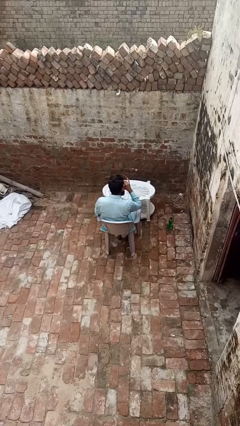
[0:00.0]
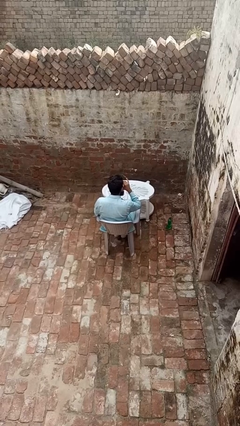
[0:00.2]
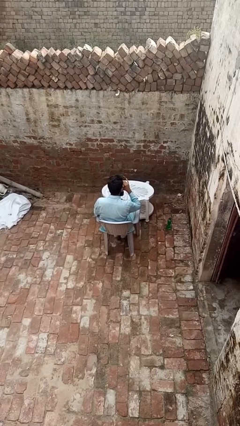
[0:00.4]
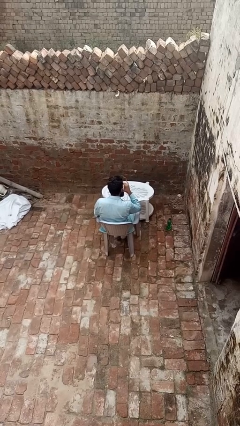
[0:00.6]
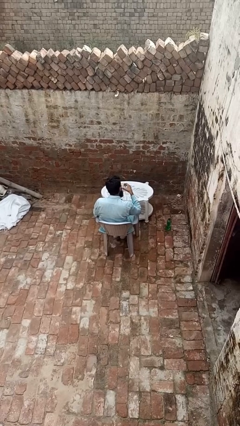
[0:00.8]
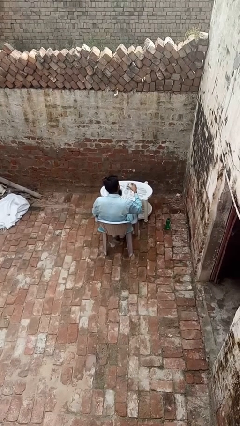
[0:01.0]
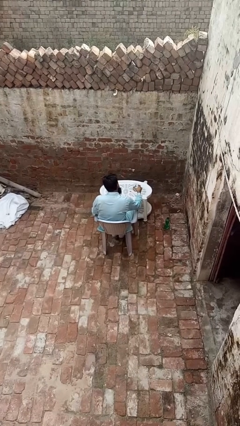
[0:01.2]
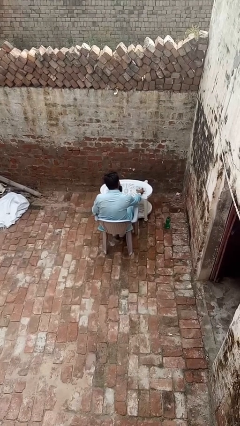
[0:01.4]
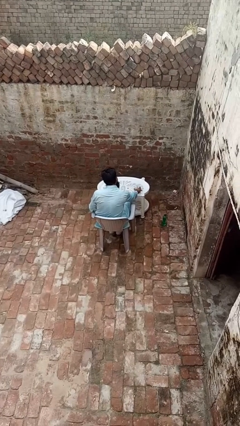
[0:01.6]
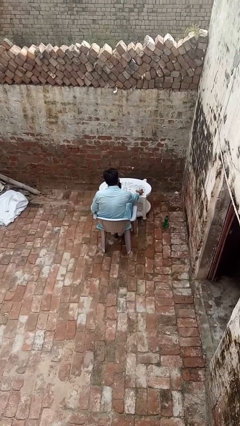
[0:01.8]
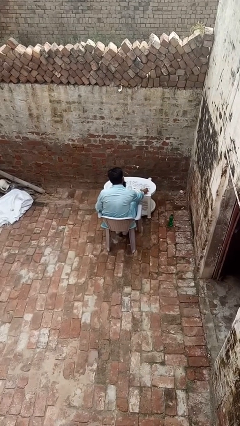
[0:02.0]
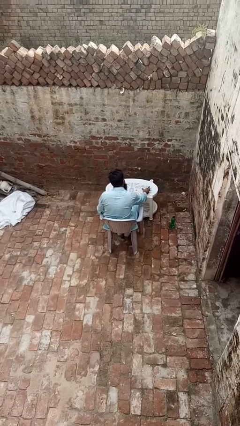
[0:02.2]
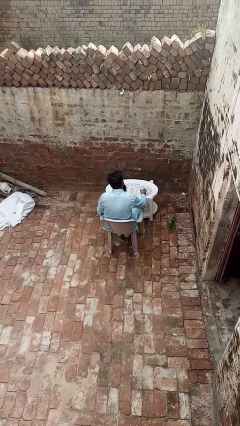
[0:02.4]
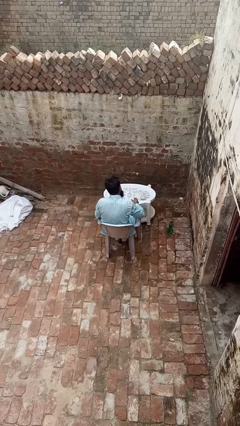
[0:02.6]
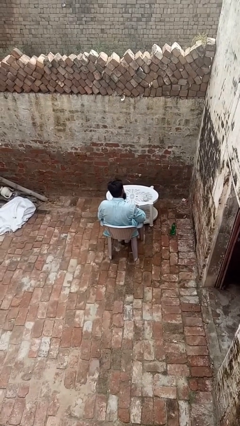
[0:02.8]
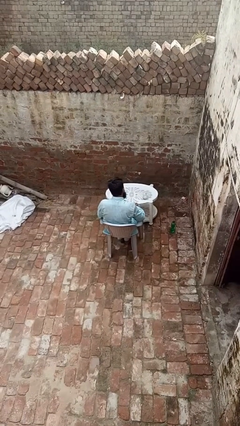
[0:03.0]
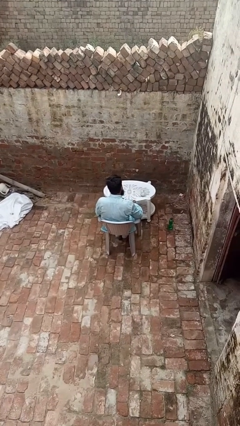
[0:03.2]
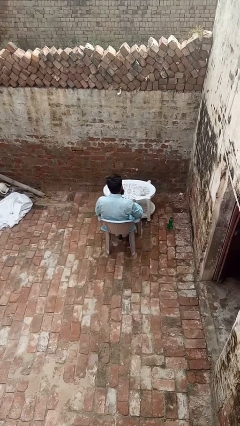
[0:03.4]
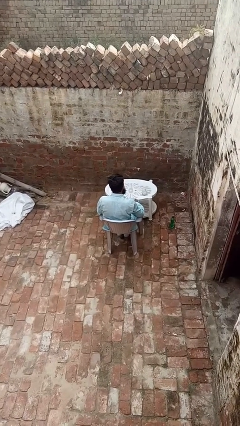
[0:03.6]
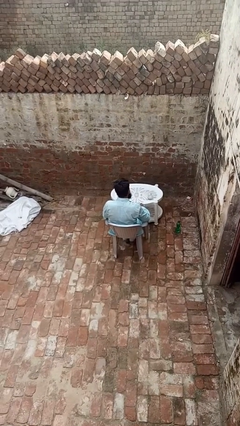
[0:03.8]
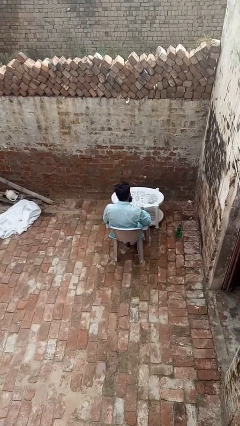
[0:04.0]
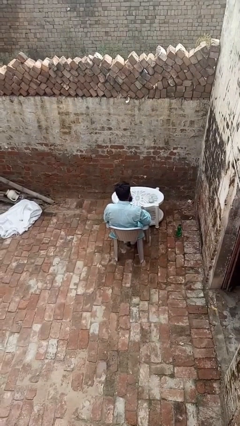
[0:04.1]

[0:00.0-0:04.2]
person puts down object on table

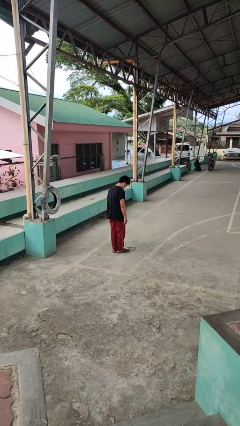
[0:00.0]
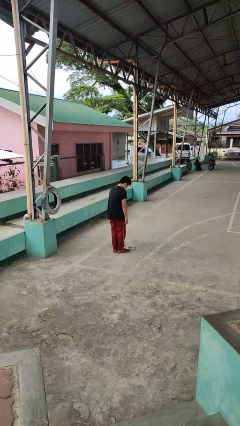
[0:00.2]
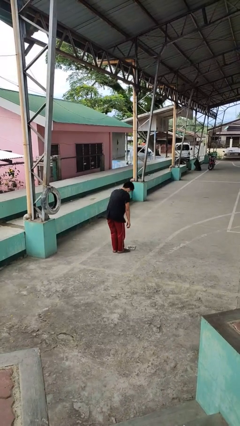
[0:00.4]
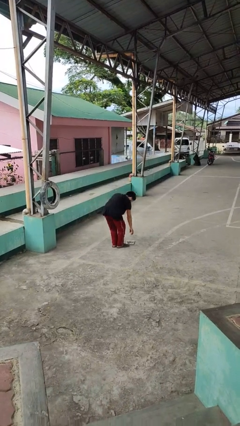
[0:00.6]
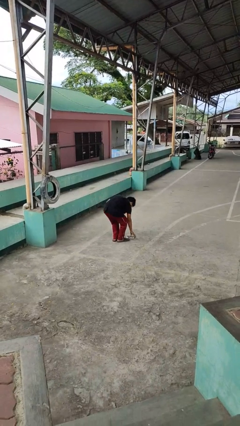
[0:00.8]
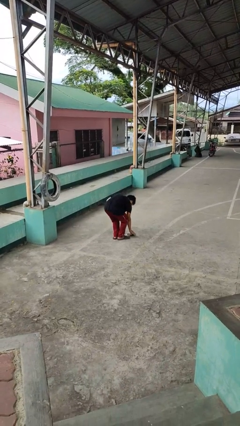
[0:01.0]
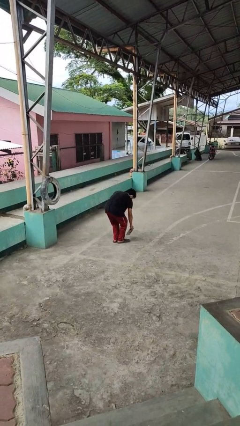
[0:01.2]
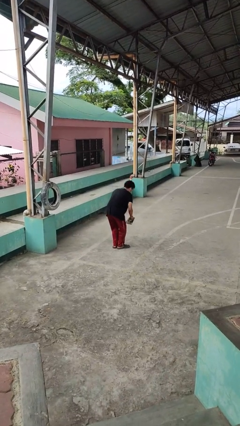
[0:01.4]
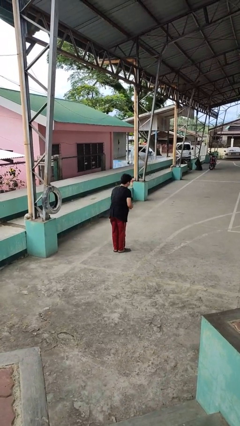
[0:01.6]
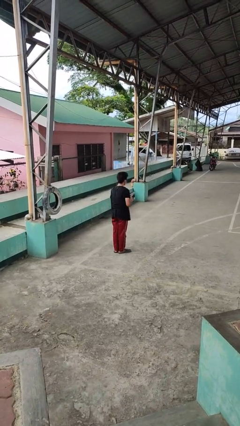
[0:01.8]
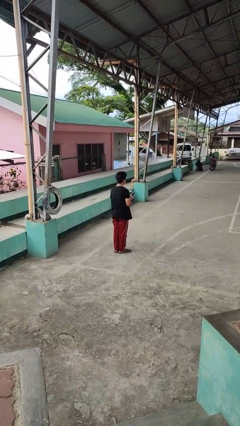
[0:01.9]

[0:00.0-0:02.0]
person picks up object from floor

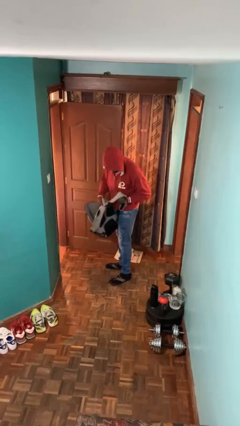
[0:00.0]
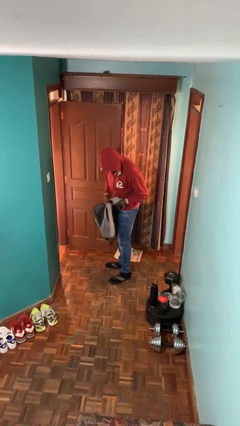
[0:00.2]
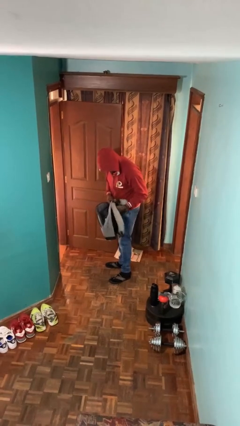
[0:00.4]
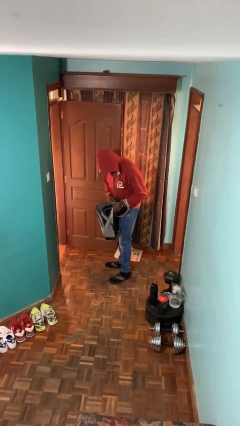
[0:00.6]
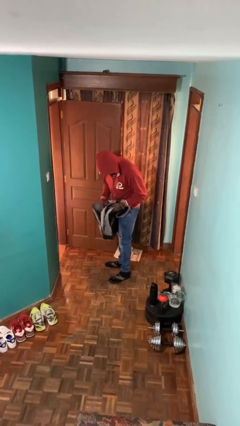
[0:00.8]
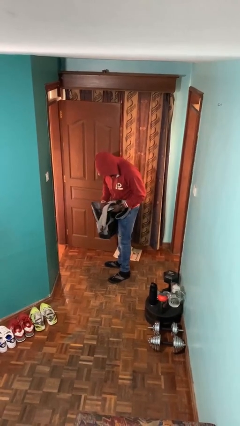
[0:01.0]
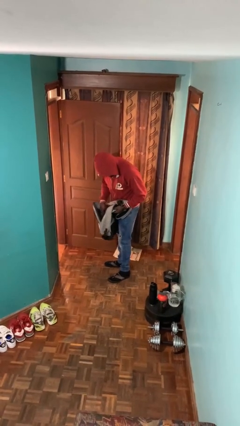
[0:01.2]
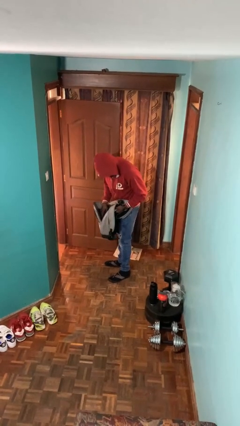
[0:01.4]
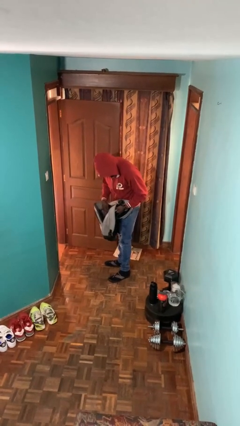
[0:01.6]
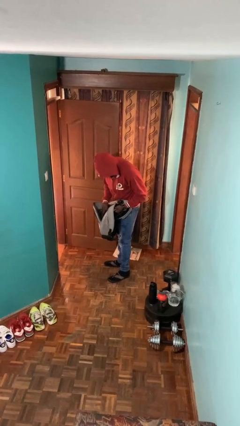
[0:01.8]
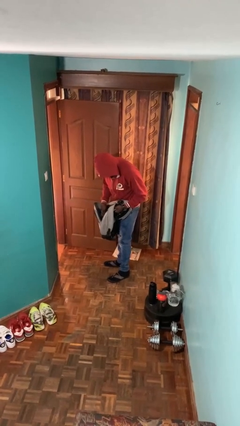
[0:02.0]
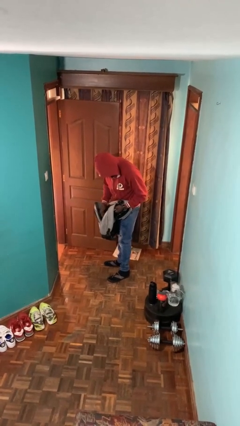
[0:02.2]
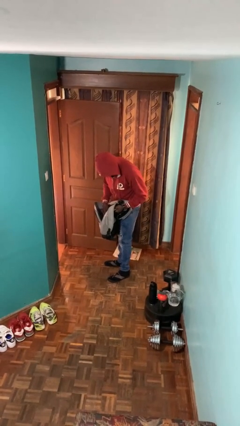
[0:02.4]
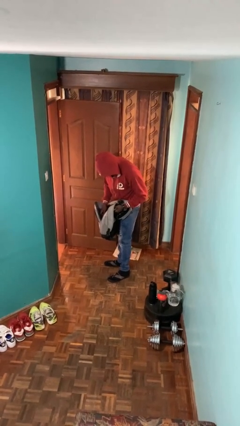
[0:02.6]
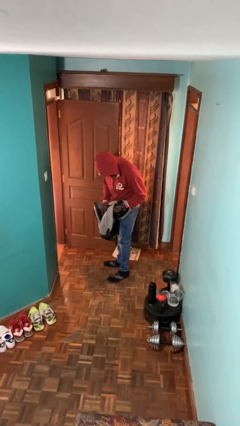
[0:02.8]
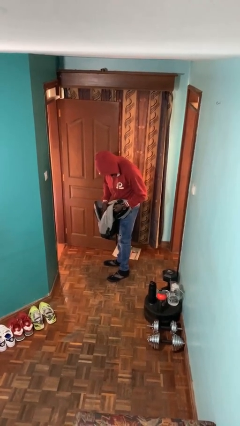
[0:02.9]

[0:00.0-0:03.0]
person searches in backpack

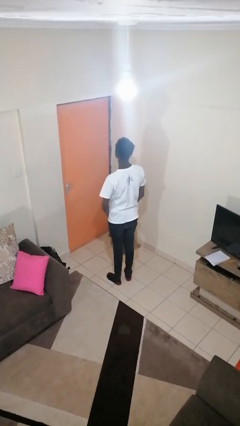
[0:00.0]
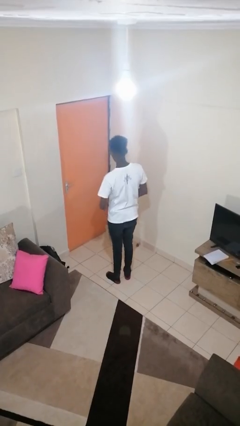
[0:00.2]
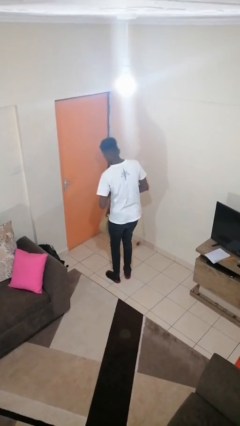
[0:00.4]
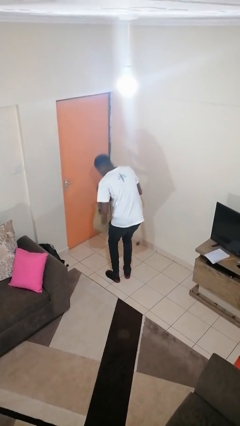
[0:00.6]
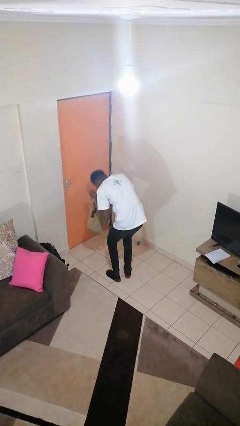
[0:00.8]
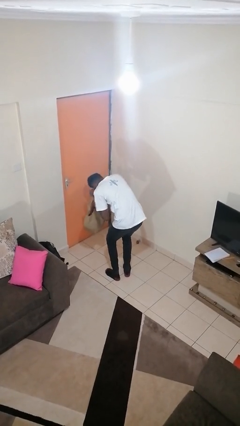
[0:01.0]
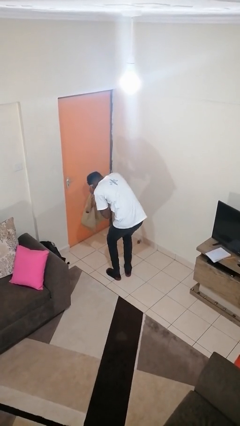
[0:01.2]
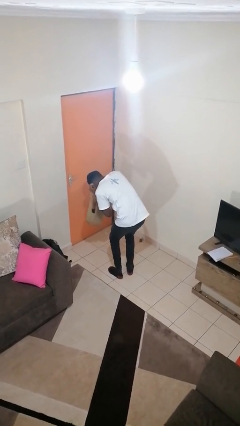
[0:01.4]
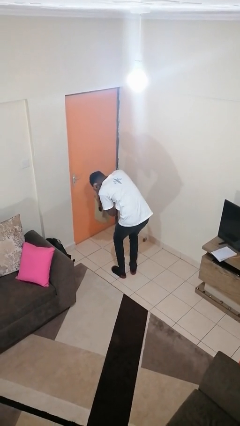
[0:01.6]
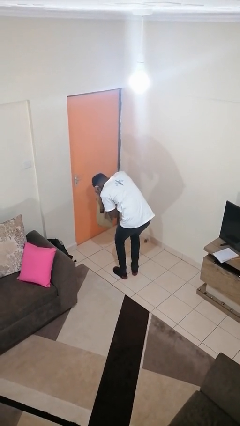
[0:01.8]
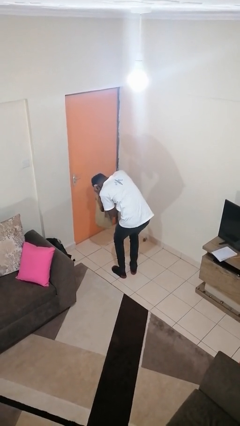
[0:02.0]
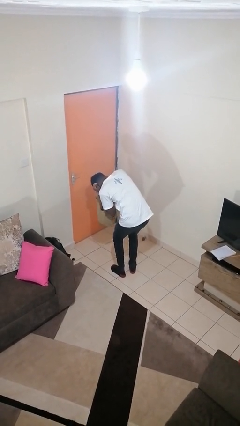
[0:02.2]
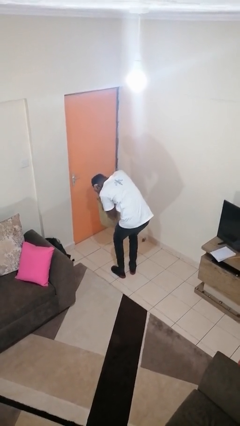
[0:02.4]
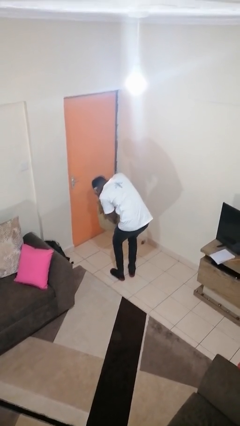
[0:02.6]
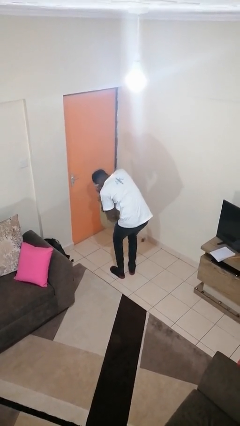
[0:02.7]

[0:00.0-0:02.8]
person searches in bag

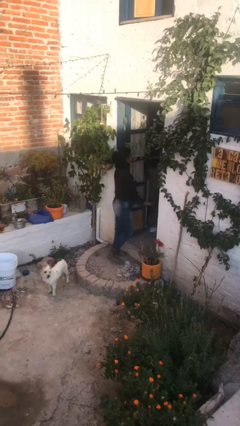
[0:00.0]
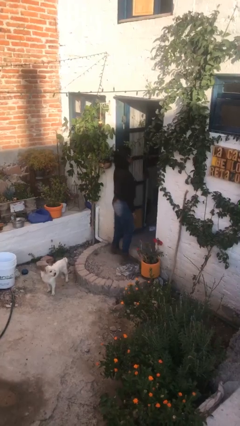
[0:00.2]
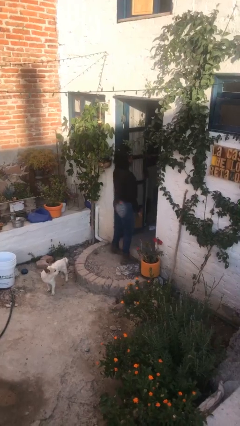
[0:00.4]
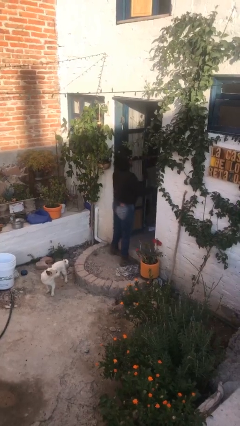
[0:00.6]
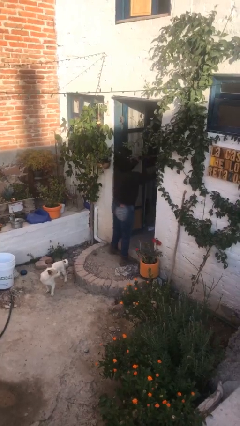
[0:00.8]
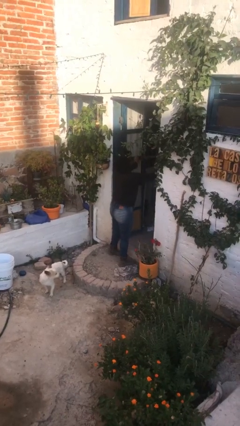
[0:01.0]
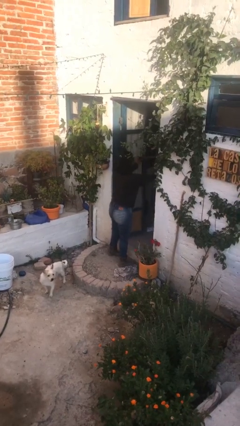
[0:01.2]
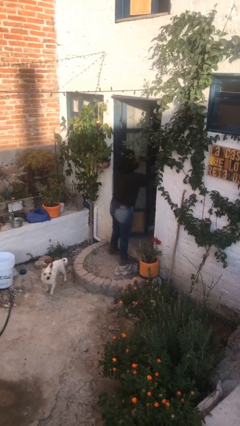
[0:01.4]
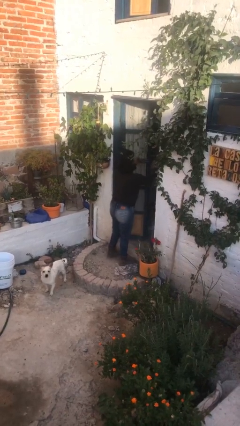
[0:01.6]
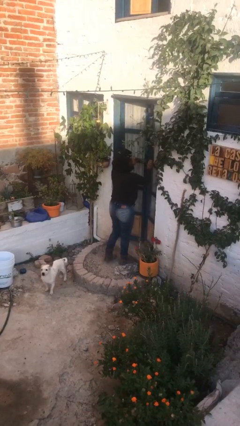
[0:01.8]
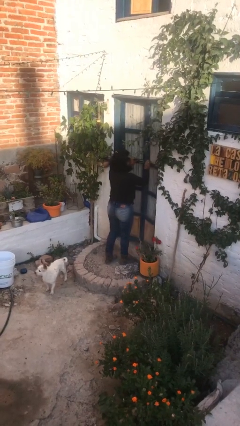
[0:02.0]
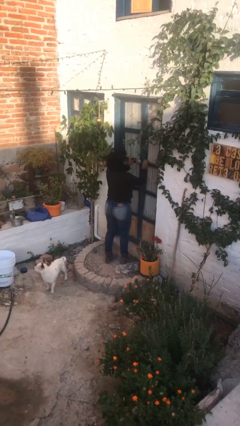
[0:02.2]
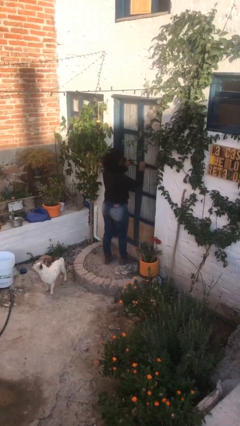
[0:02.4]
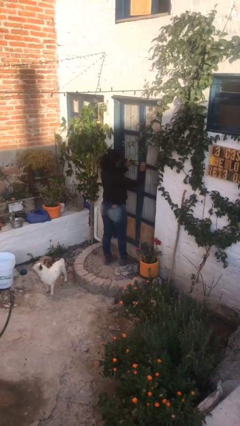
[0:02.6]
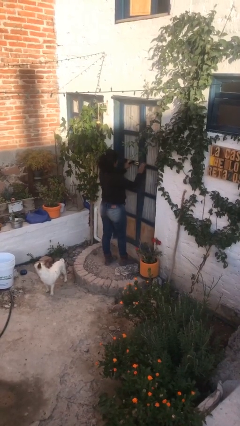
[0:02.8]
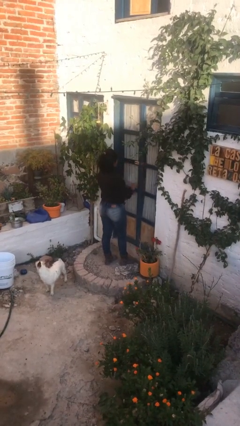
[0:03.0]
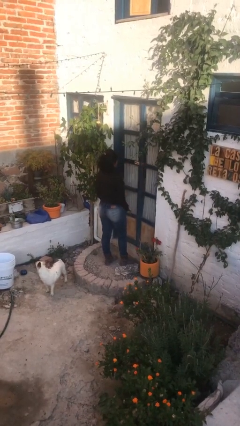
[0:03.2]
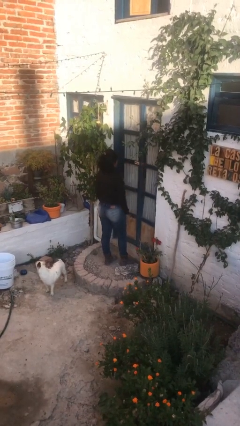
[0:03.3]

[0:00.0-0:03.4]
person closes facility door

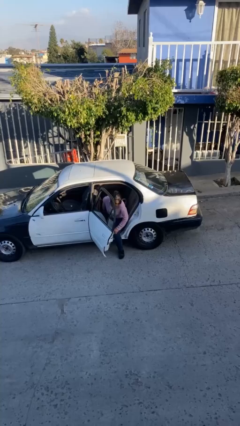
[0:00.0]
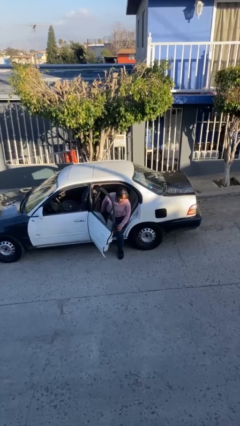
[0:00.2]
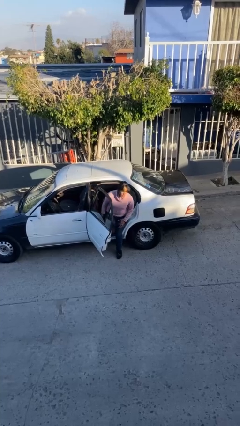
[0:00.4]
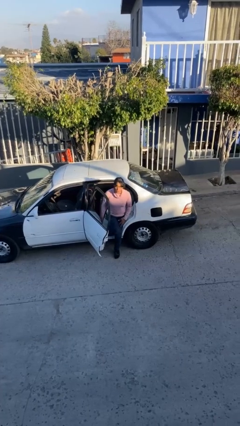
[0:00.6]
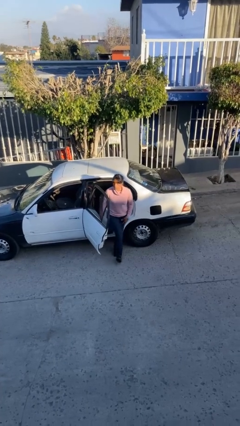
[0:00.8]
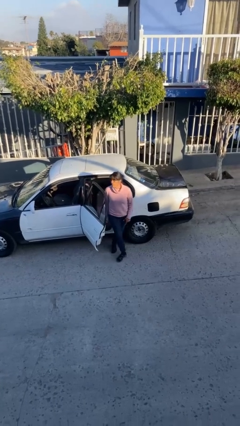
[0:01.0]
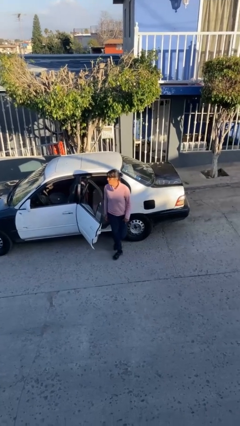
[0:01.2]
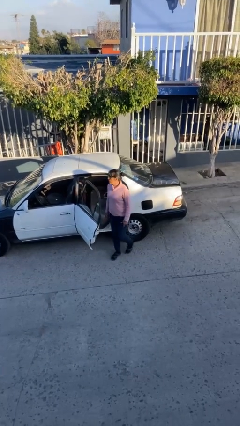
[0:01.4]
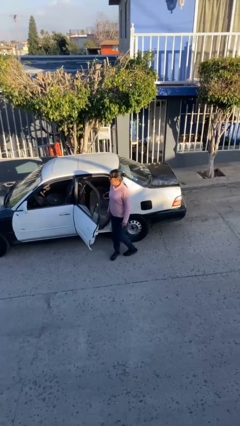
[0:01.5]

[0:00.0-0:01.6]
person exits car

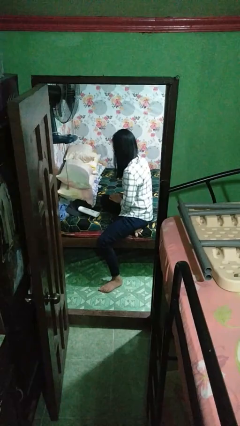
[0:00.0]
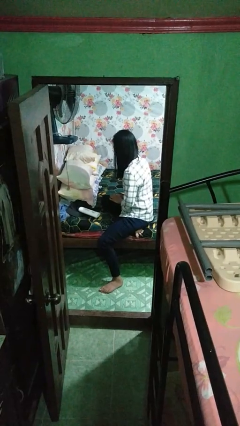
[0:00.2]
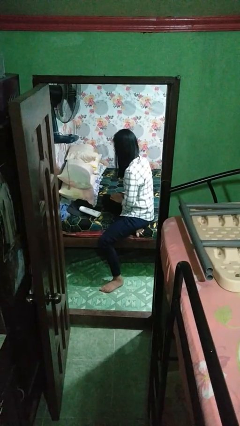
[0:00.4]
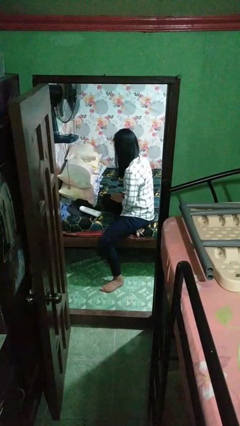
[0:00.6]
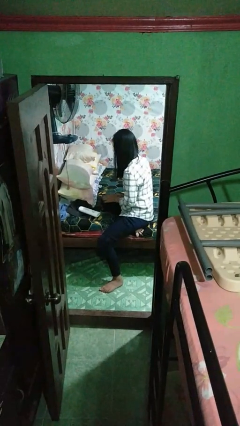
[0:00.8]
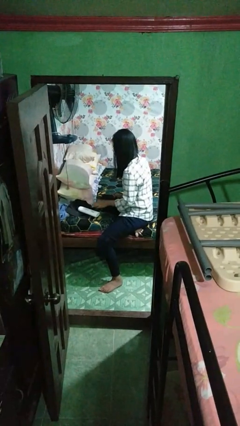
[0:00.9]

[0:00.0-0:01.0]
person picks up object from bed
